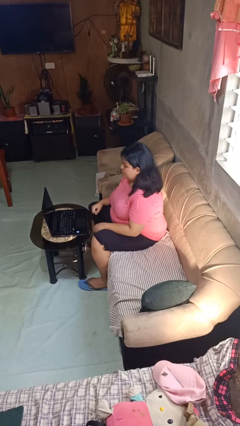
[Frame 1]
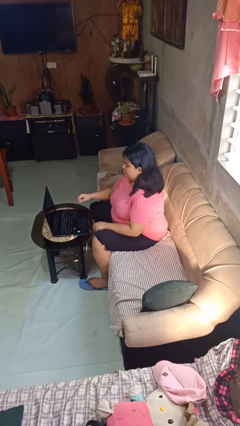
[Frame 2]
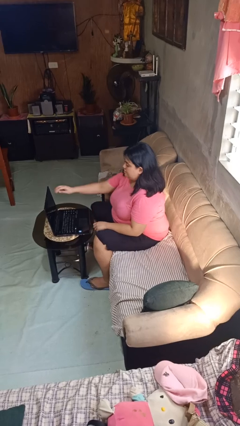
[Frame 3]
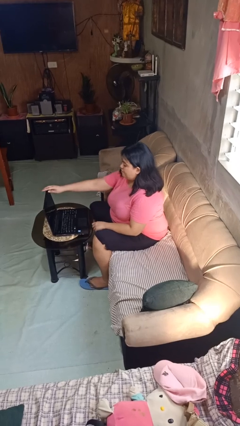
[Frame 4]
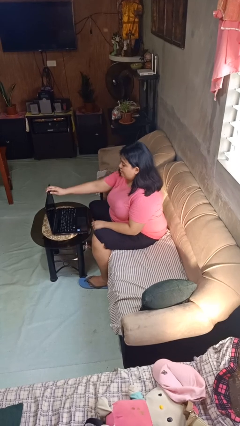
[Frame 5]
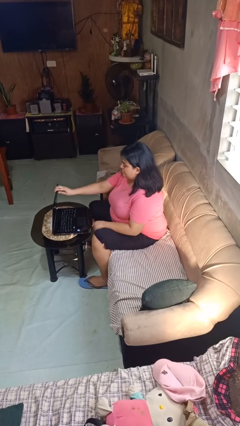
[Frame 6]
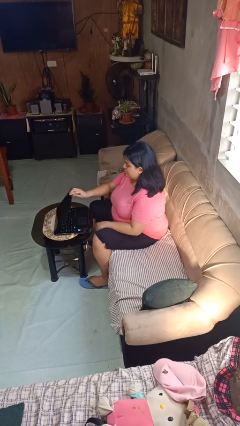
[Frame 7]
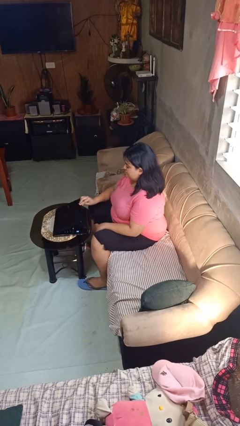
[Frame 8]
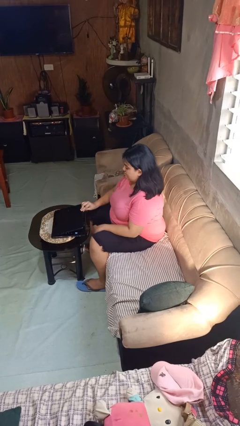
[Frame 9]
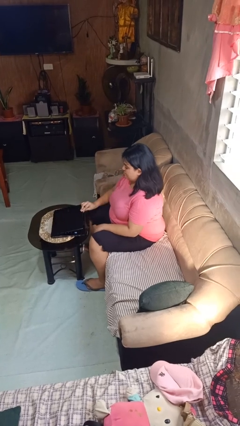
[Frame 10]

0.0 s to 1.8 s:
person closes laptop

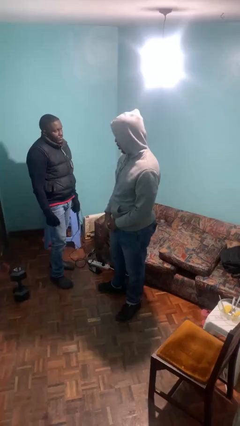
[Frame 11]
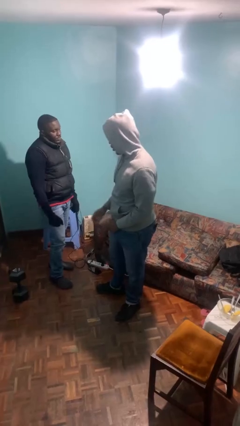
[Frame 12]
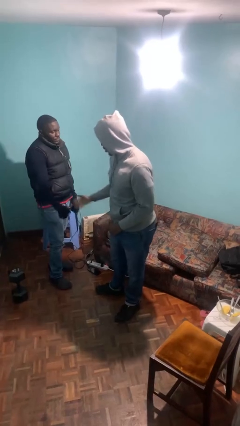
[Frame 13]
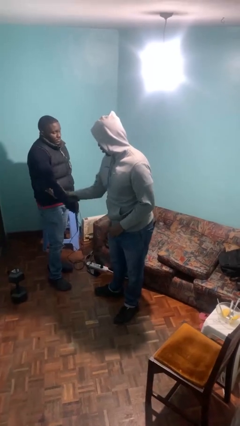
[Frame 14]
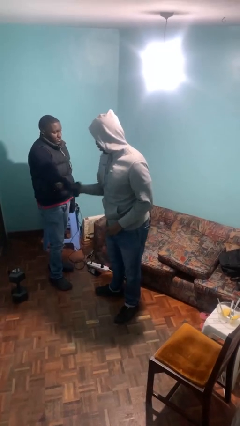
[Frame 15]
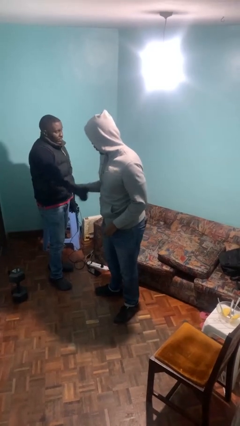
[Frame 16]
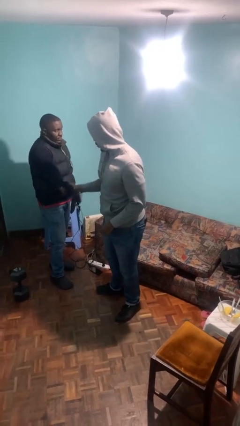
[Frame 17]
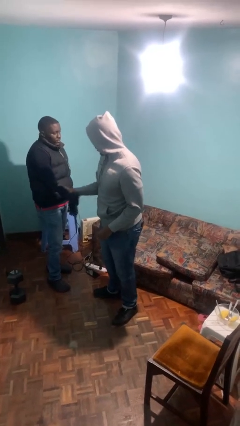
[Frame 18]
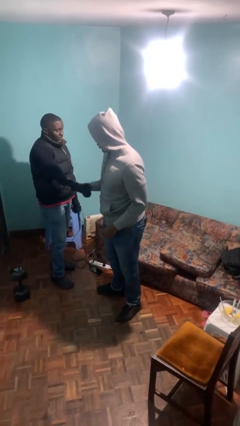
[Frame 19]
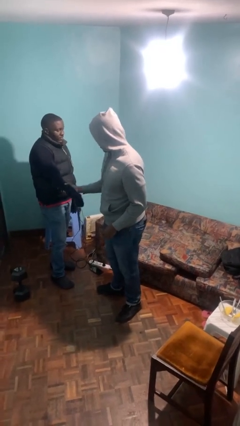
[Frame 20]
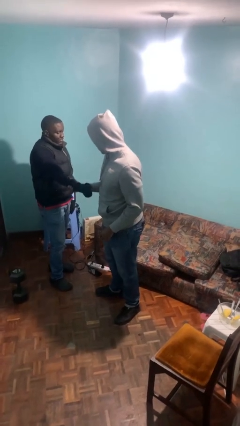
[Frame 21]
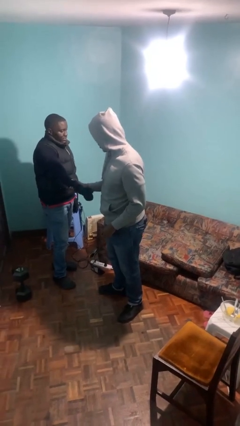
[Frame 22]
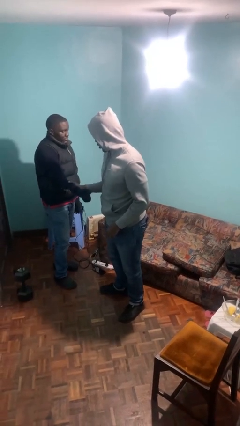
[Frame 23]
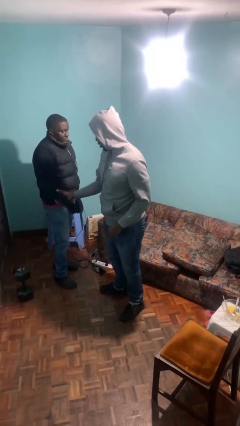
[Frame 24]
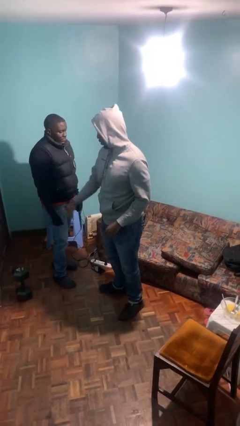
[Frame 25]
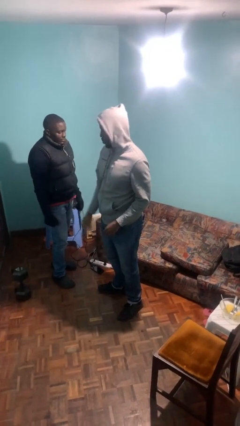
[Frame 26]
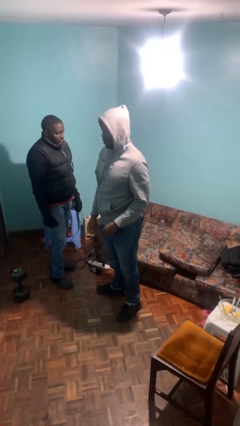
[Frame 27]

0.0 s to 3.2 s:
person grabs person by forearm

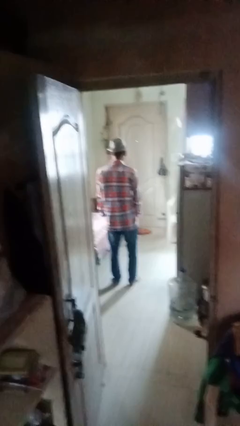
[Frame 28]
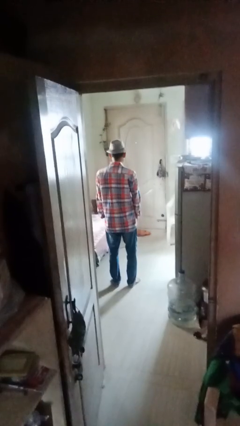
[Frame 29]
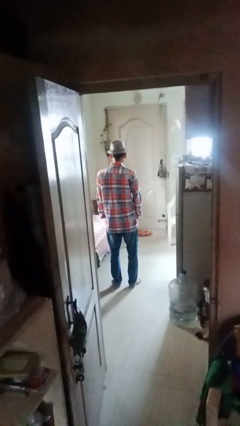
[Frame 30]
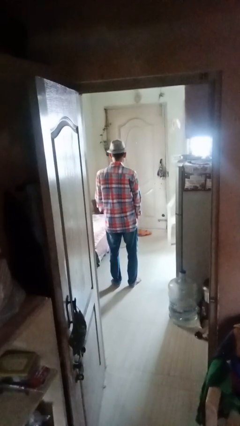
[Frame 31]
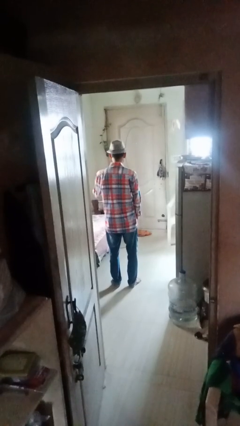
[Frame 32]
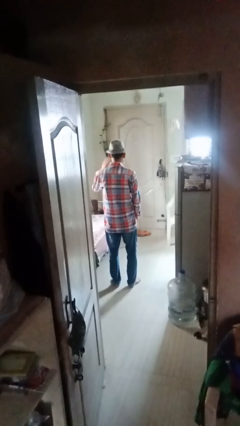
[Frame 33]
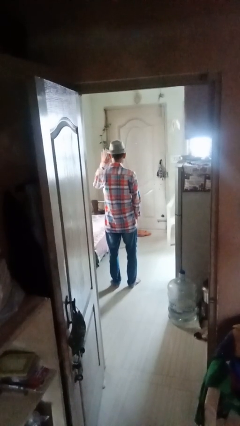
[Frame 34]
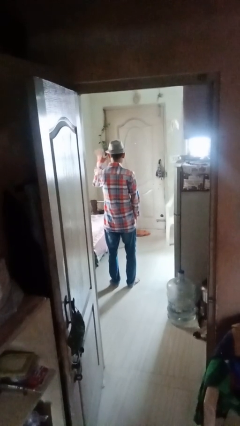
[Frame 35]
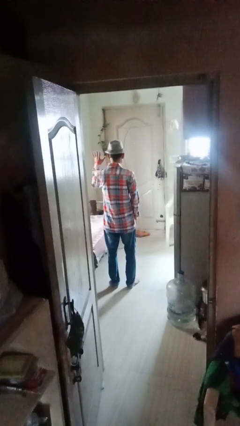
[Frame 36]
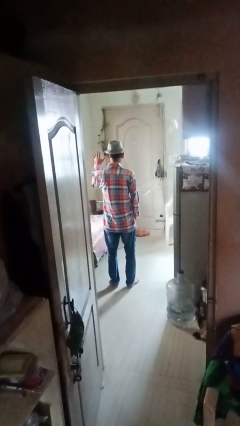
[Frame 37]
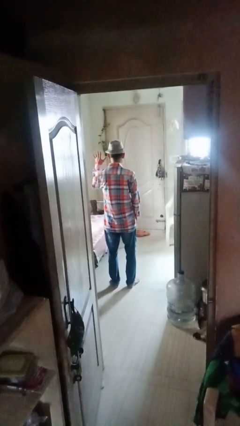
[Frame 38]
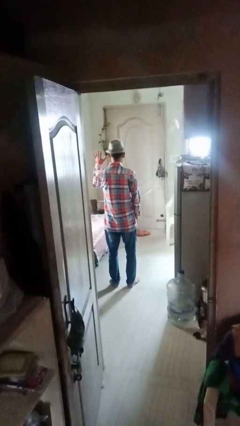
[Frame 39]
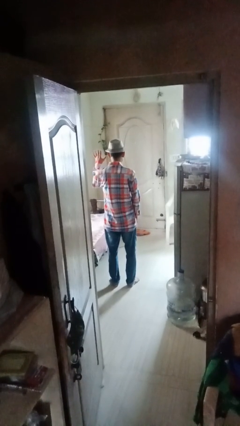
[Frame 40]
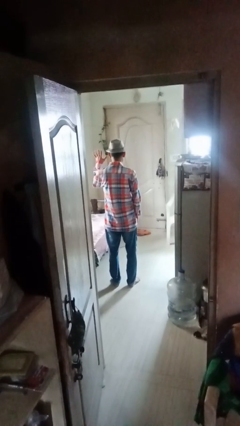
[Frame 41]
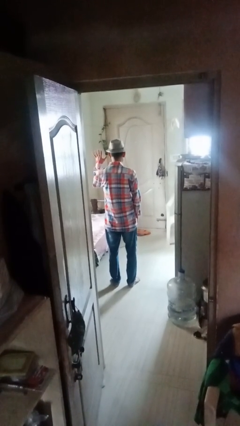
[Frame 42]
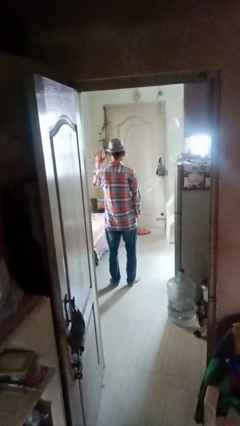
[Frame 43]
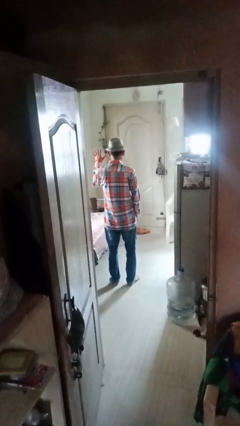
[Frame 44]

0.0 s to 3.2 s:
person gestures number five

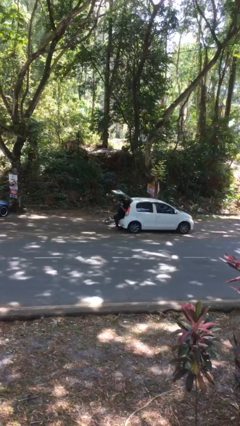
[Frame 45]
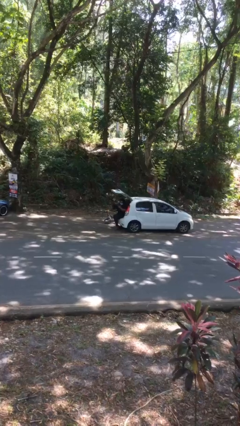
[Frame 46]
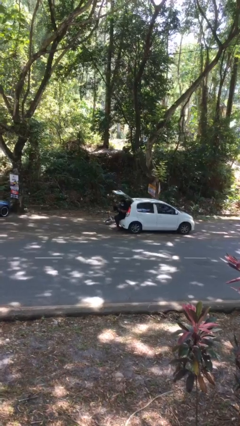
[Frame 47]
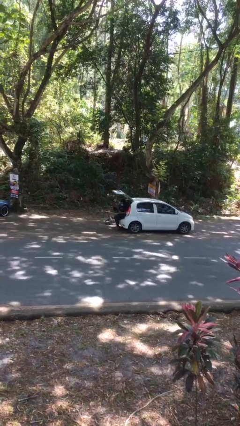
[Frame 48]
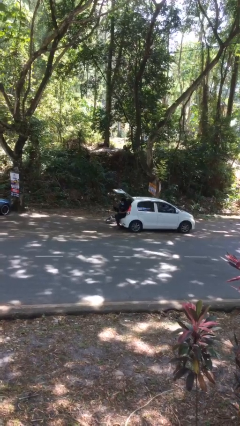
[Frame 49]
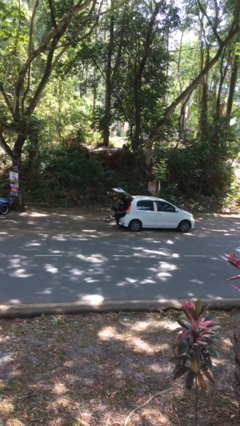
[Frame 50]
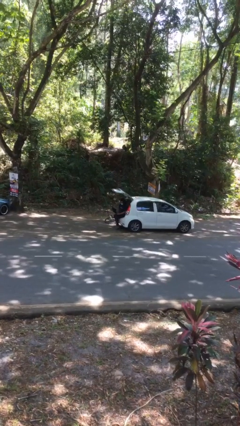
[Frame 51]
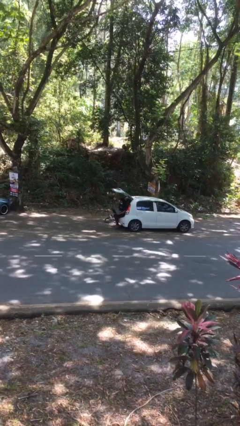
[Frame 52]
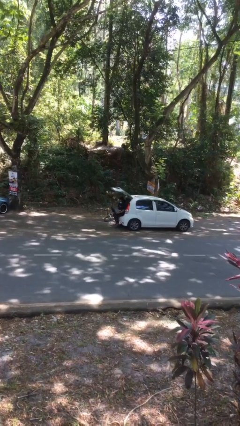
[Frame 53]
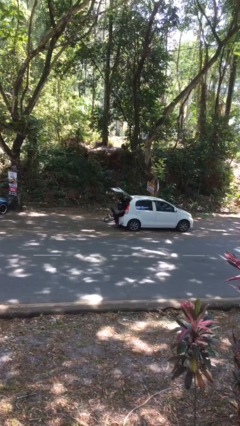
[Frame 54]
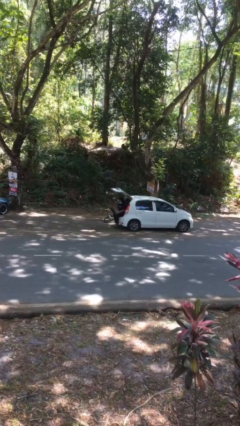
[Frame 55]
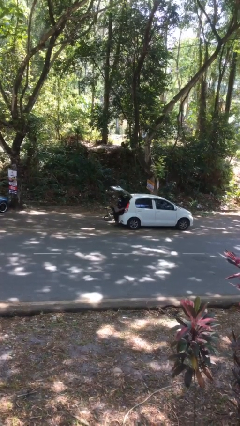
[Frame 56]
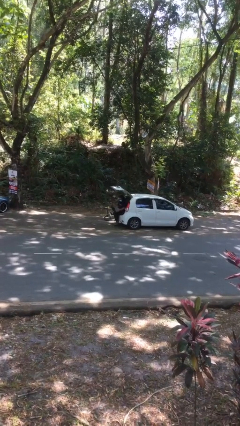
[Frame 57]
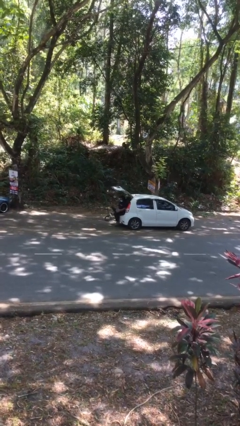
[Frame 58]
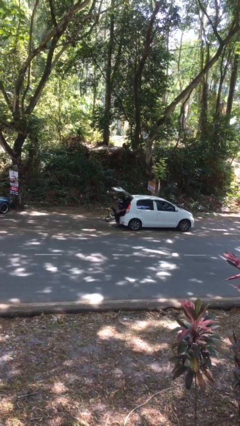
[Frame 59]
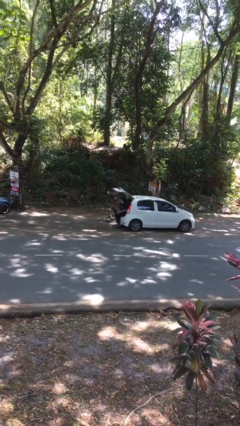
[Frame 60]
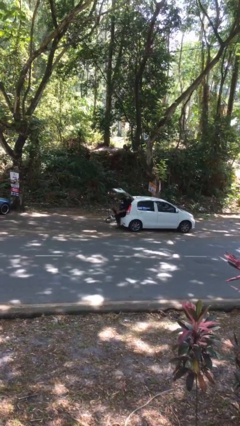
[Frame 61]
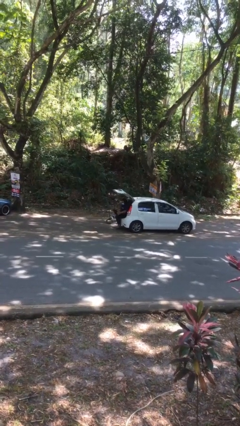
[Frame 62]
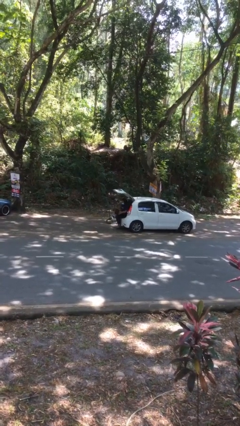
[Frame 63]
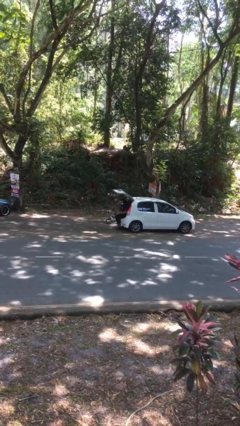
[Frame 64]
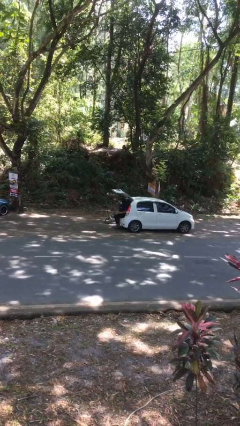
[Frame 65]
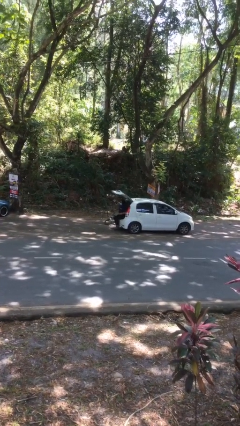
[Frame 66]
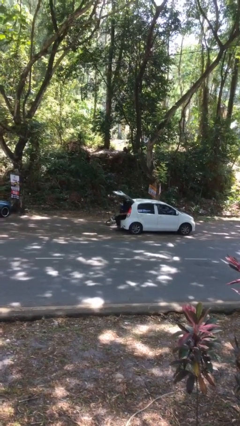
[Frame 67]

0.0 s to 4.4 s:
person interacts with laptop

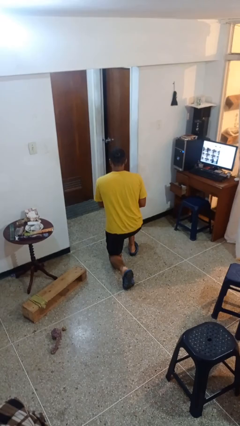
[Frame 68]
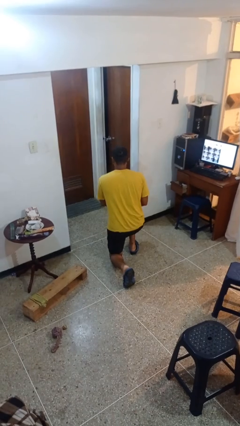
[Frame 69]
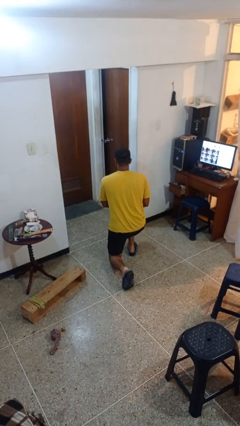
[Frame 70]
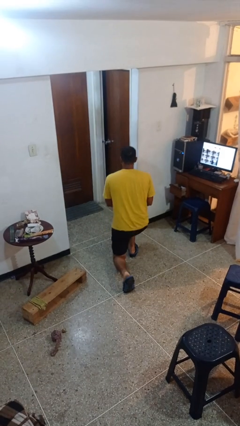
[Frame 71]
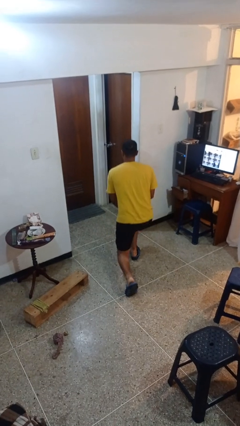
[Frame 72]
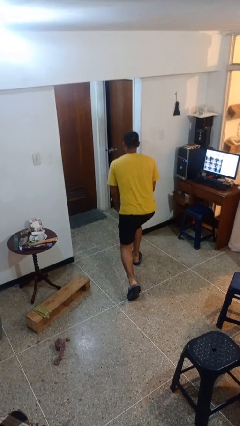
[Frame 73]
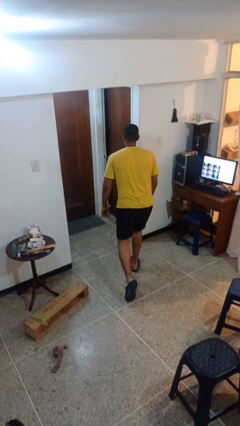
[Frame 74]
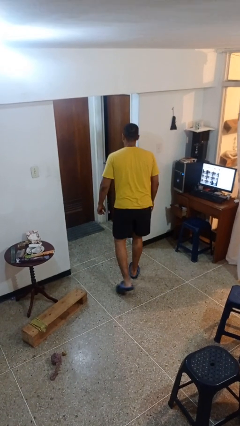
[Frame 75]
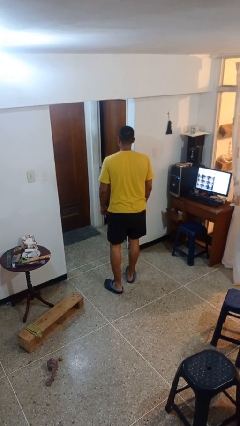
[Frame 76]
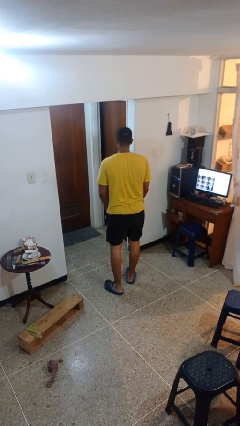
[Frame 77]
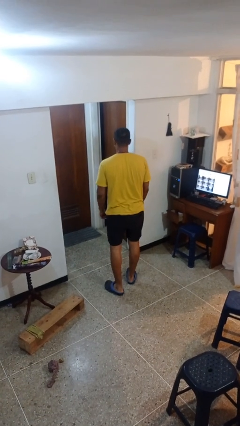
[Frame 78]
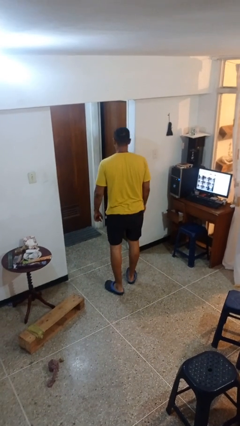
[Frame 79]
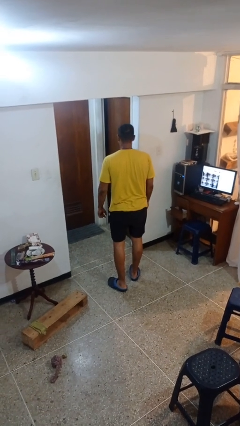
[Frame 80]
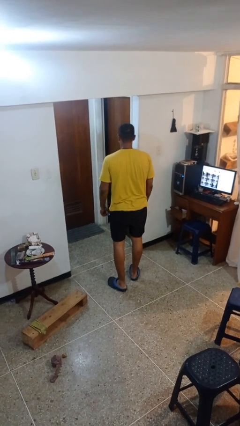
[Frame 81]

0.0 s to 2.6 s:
person stands up from floor

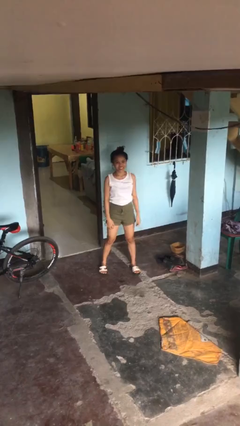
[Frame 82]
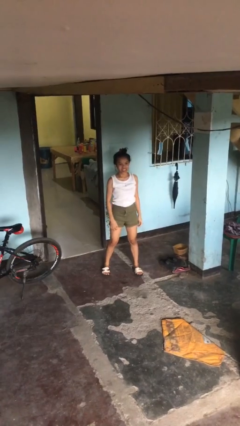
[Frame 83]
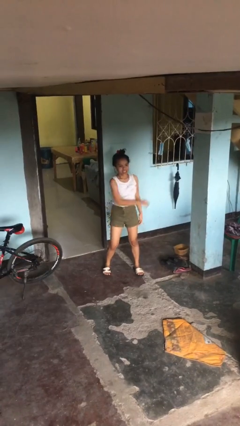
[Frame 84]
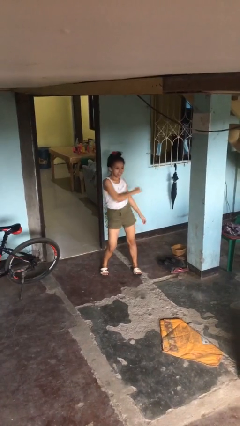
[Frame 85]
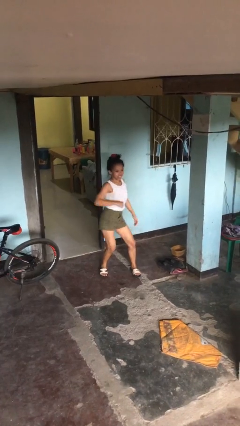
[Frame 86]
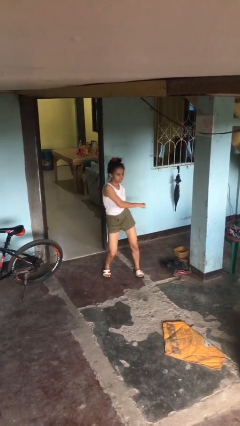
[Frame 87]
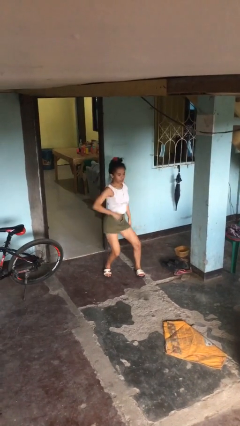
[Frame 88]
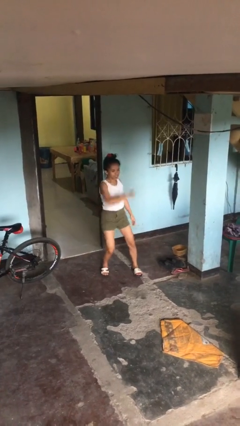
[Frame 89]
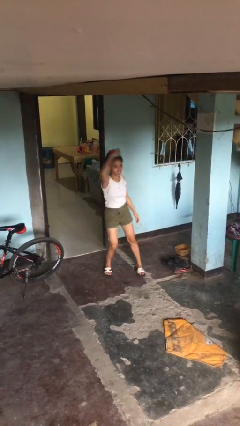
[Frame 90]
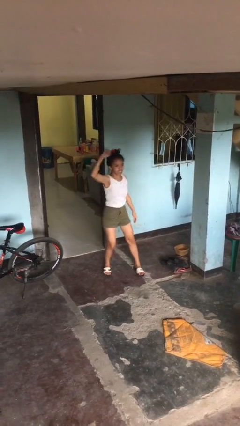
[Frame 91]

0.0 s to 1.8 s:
person dances in place

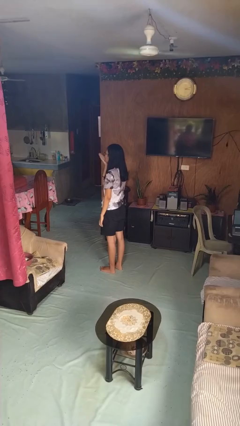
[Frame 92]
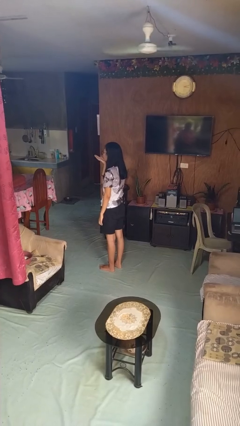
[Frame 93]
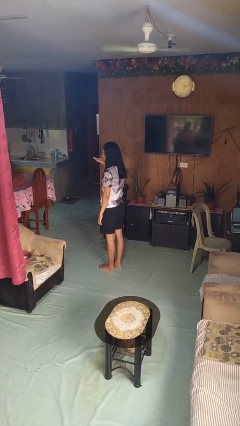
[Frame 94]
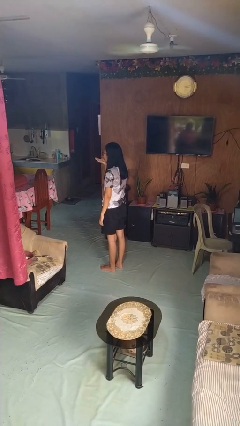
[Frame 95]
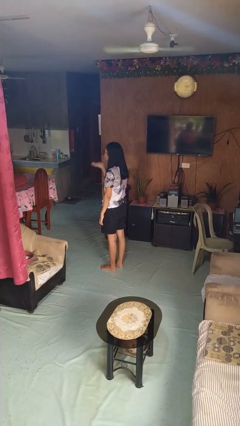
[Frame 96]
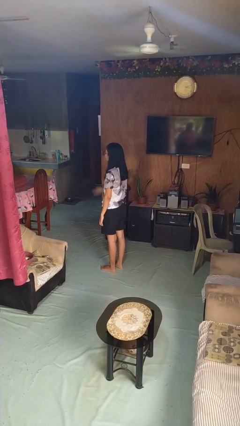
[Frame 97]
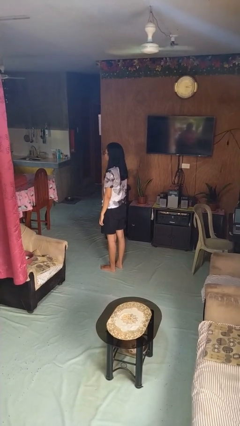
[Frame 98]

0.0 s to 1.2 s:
person gestures blow kiss
